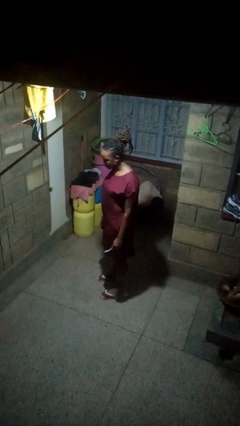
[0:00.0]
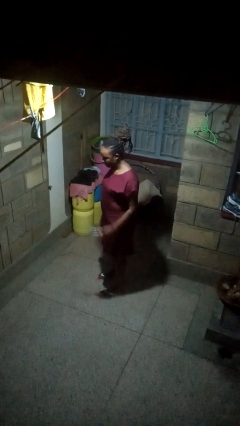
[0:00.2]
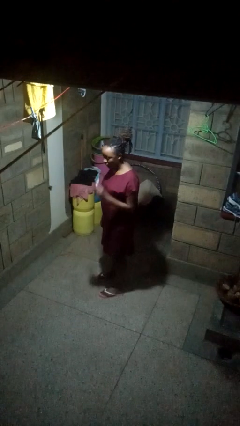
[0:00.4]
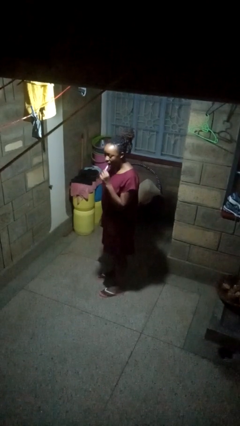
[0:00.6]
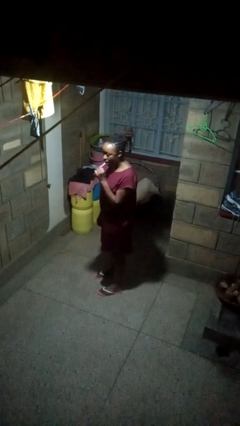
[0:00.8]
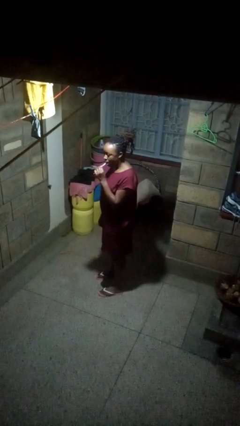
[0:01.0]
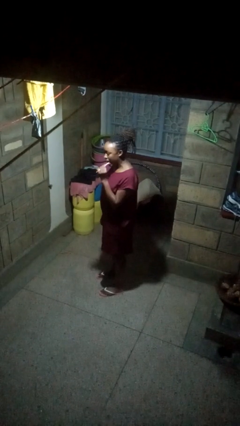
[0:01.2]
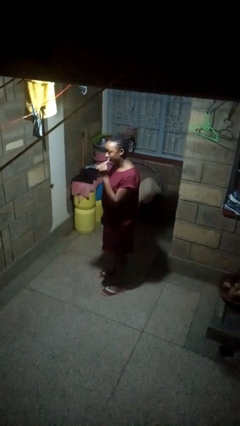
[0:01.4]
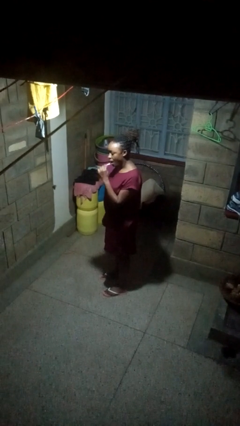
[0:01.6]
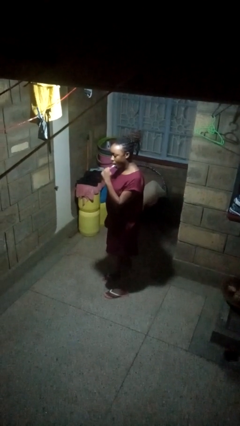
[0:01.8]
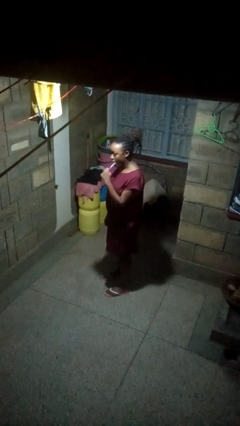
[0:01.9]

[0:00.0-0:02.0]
person brushes teeth

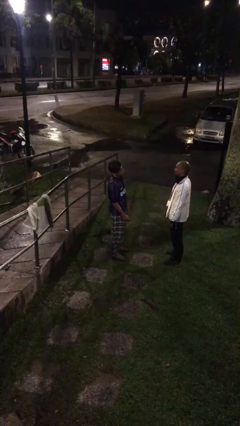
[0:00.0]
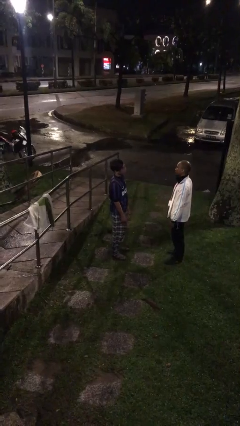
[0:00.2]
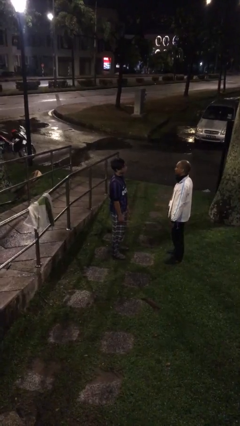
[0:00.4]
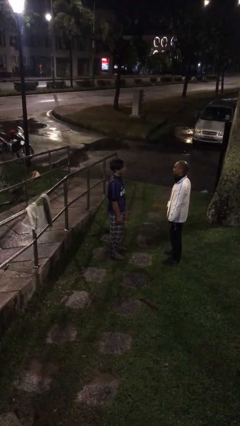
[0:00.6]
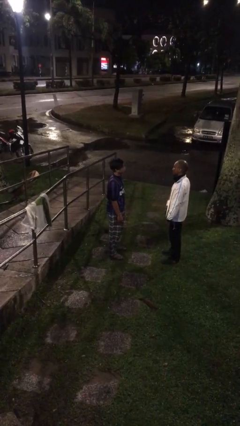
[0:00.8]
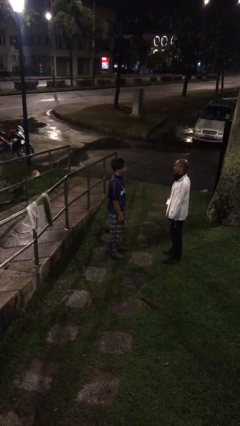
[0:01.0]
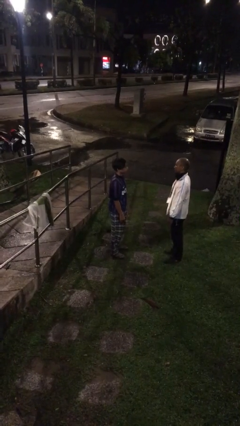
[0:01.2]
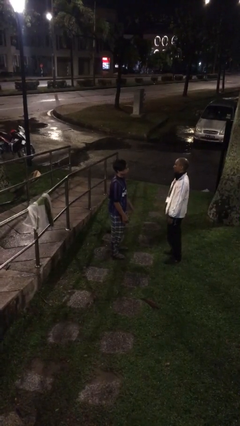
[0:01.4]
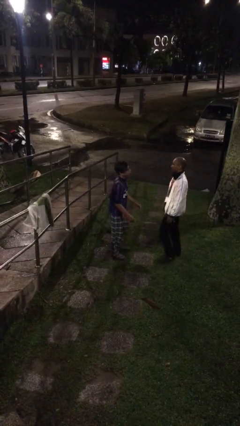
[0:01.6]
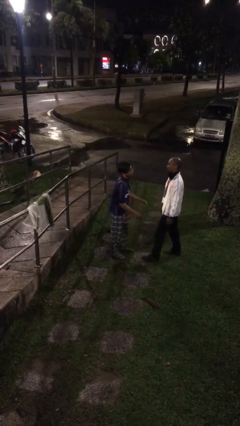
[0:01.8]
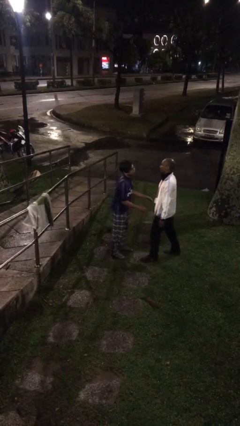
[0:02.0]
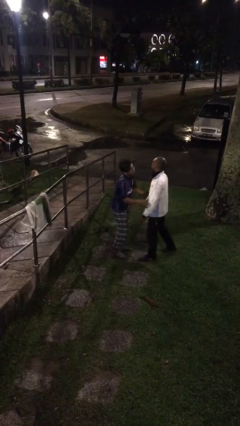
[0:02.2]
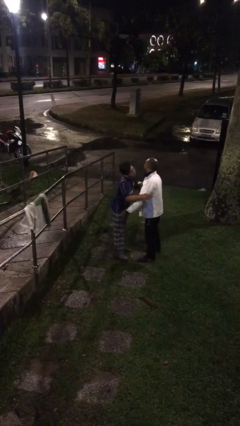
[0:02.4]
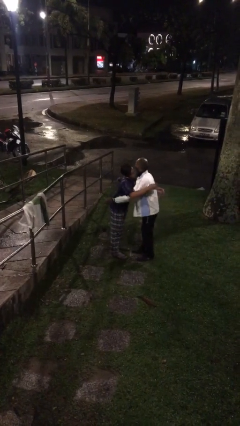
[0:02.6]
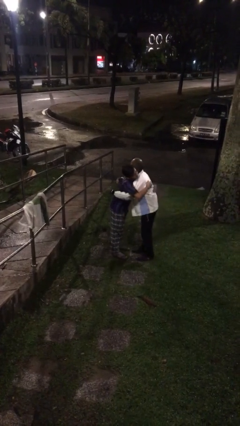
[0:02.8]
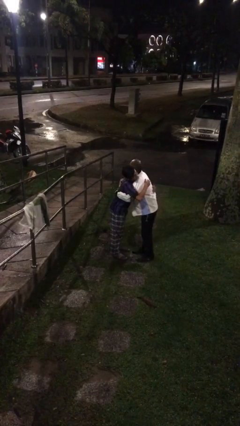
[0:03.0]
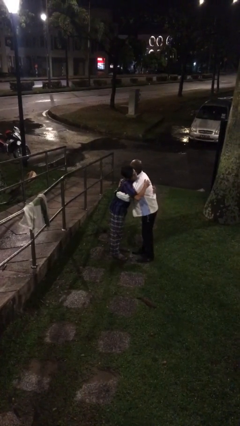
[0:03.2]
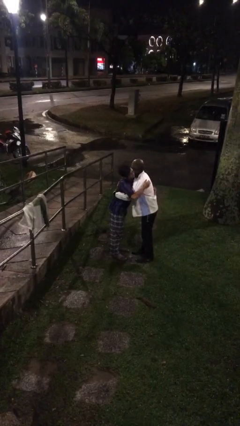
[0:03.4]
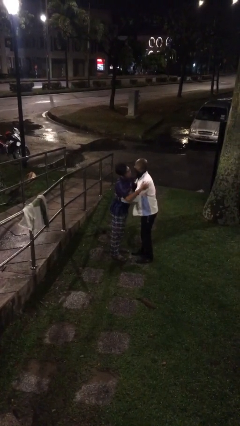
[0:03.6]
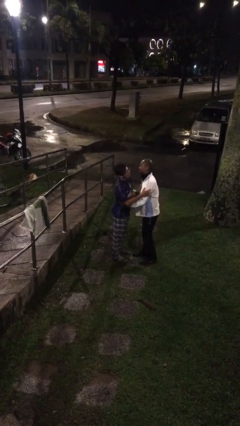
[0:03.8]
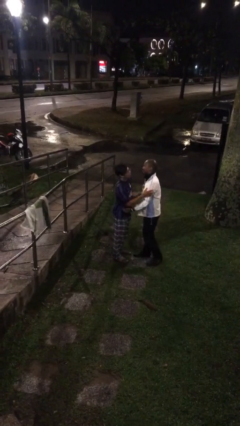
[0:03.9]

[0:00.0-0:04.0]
person embraces person

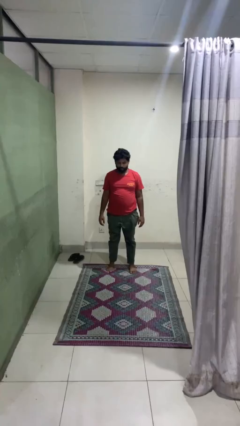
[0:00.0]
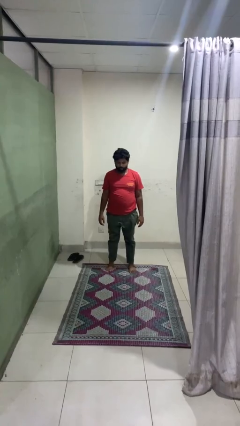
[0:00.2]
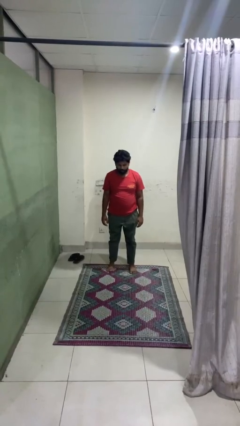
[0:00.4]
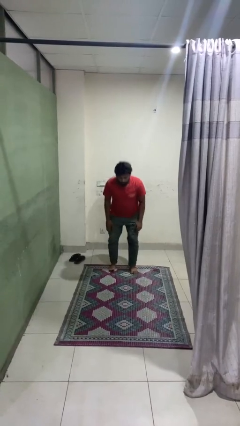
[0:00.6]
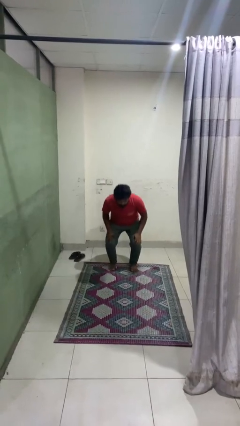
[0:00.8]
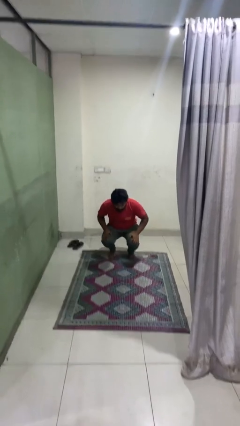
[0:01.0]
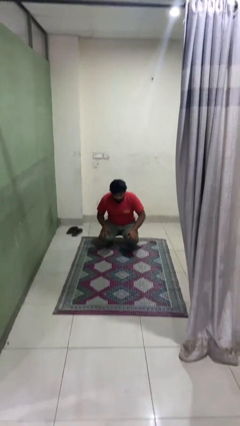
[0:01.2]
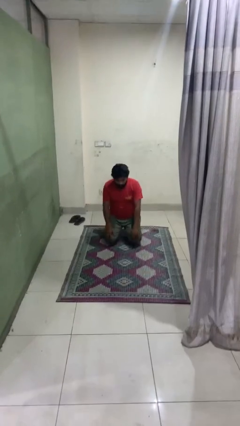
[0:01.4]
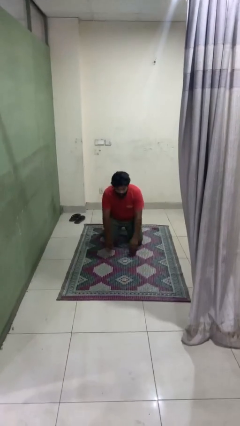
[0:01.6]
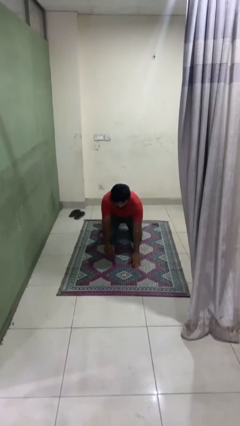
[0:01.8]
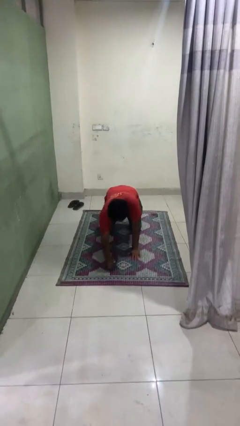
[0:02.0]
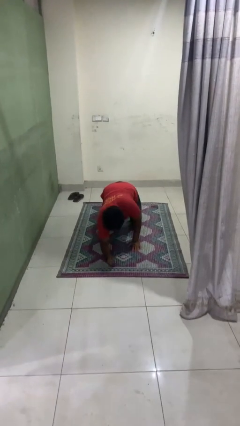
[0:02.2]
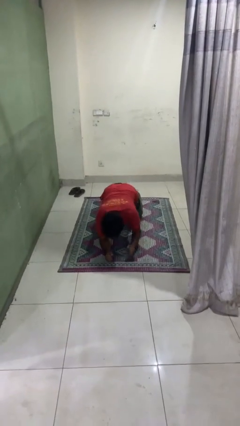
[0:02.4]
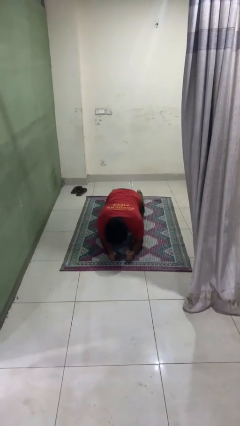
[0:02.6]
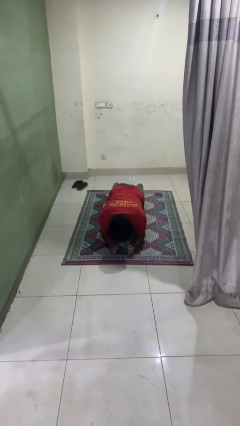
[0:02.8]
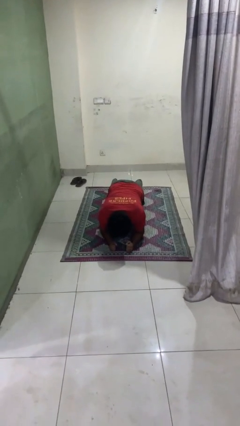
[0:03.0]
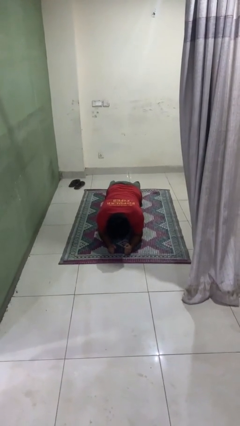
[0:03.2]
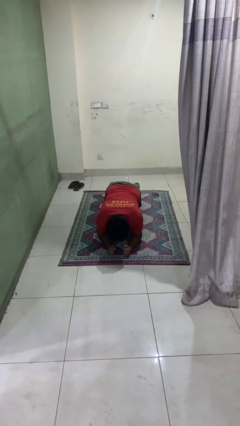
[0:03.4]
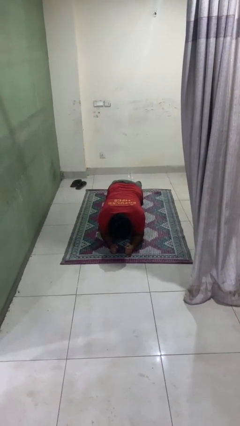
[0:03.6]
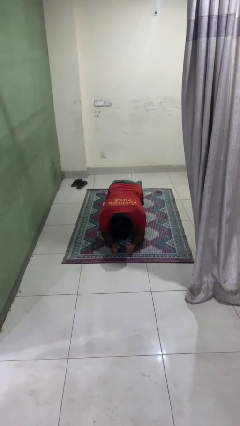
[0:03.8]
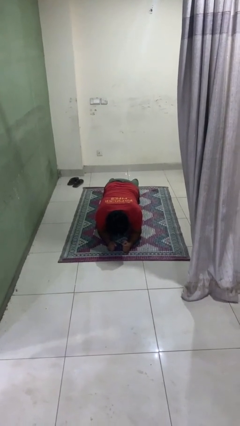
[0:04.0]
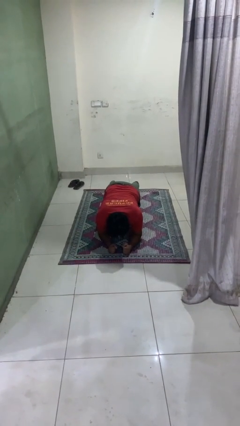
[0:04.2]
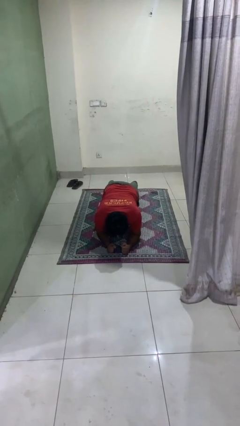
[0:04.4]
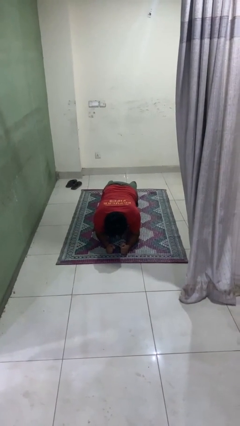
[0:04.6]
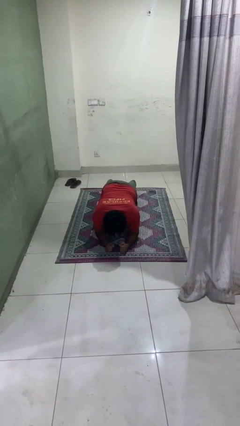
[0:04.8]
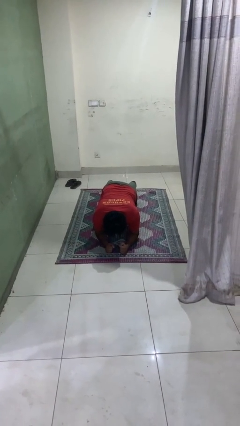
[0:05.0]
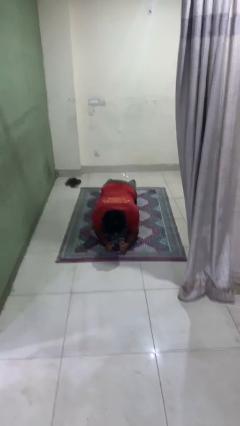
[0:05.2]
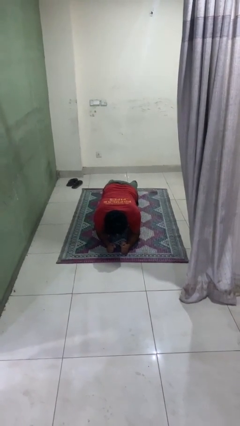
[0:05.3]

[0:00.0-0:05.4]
person exercises with plank

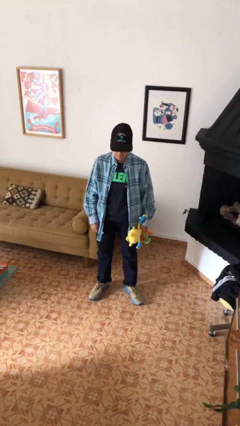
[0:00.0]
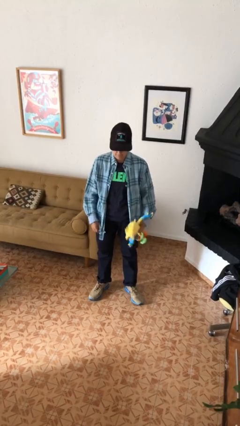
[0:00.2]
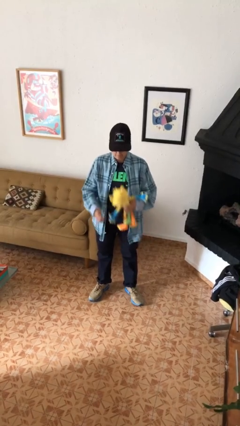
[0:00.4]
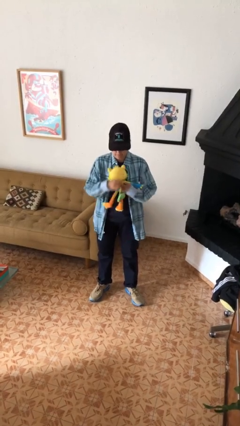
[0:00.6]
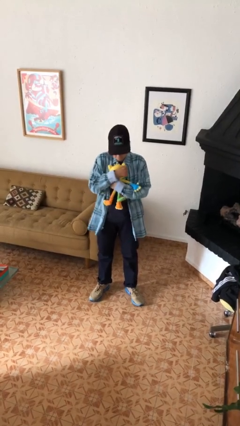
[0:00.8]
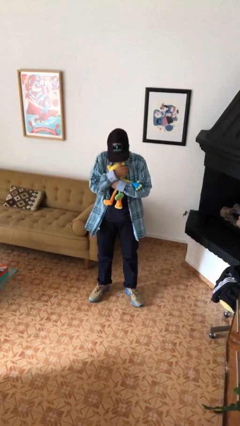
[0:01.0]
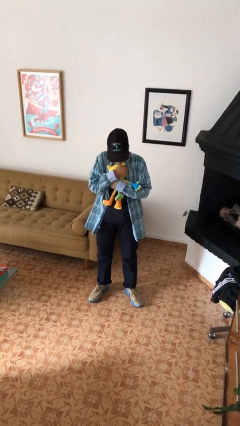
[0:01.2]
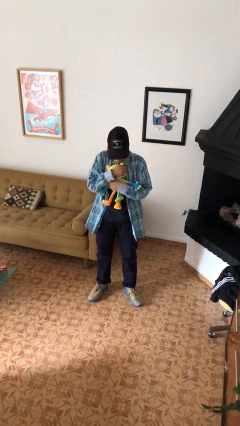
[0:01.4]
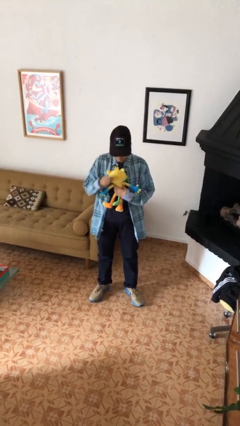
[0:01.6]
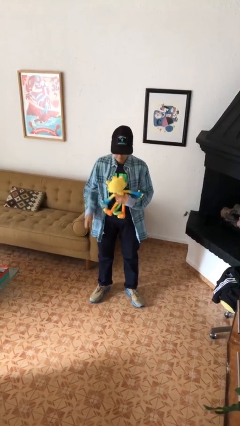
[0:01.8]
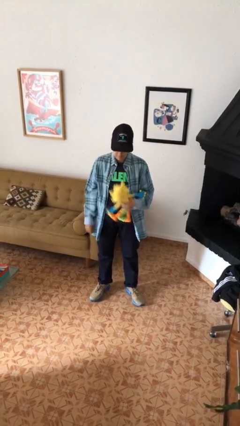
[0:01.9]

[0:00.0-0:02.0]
person hugs stuffed animal

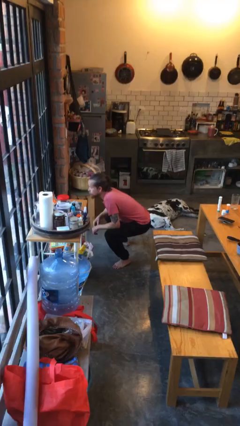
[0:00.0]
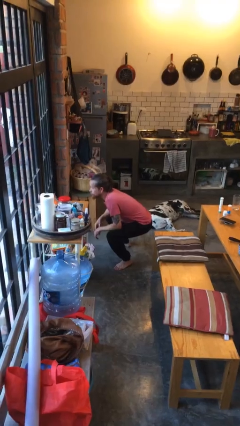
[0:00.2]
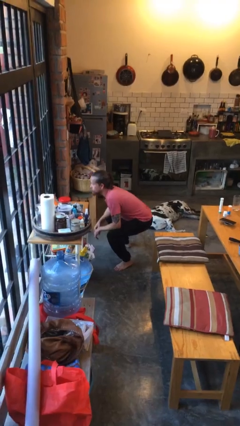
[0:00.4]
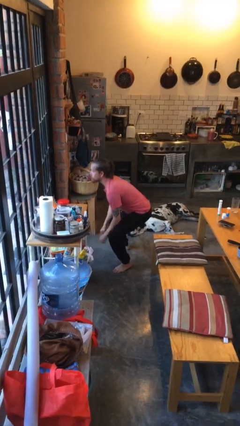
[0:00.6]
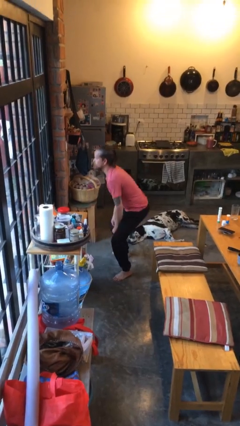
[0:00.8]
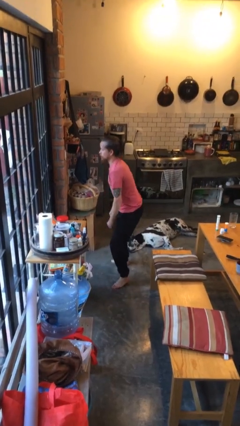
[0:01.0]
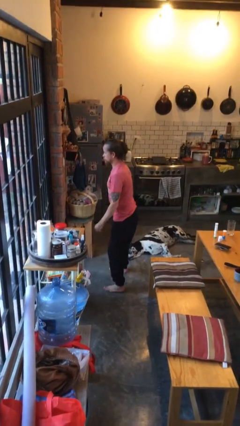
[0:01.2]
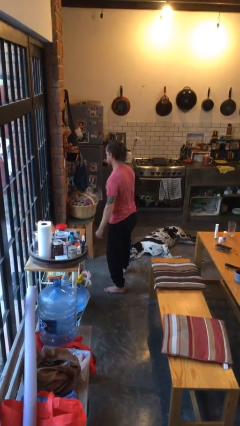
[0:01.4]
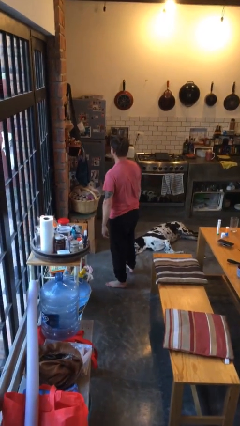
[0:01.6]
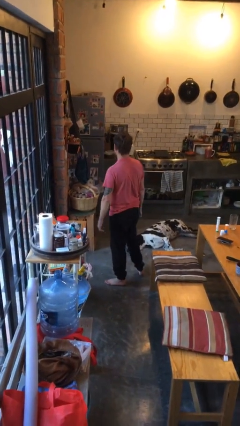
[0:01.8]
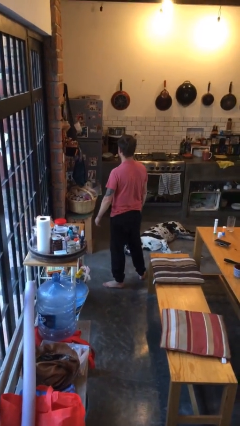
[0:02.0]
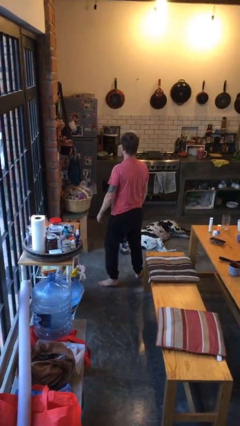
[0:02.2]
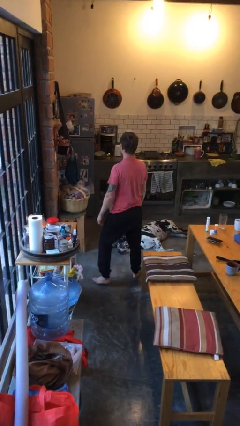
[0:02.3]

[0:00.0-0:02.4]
person stands up

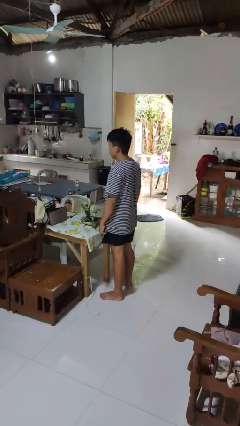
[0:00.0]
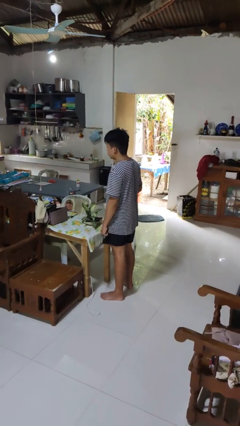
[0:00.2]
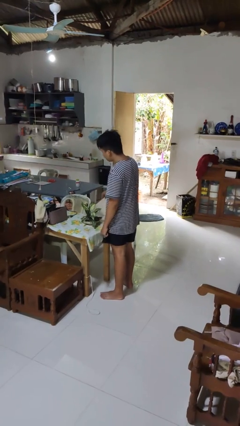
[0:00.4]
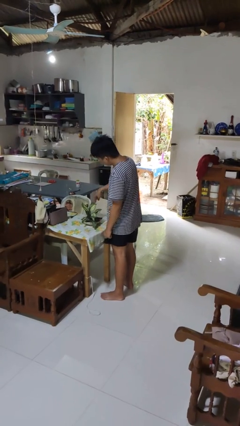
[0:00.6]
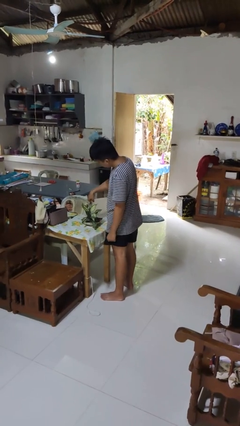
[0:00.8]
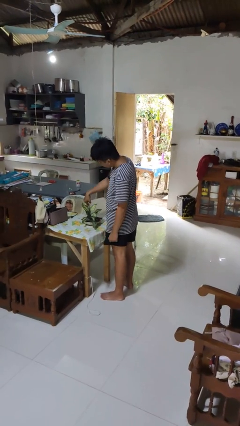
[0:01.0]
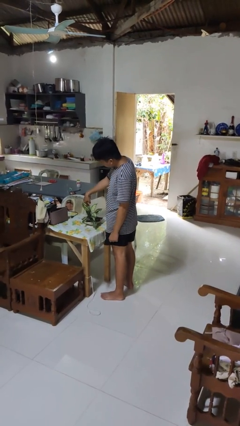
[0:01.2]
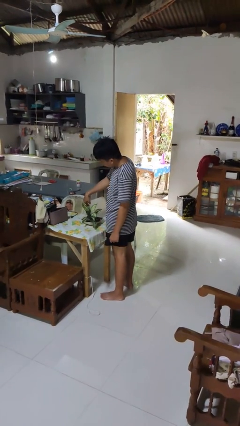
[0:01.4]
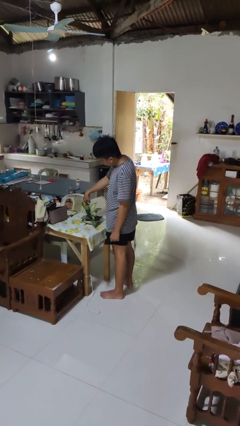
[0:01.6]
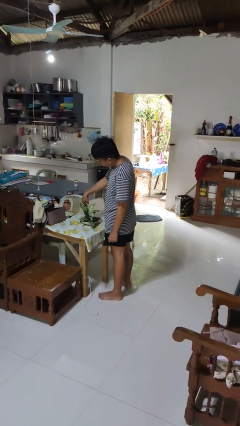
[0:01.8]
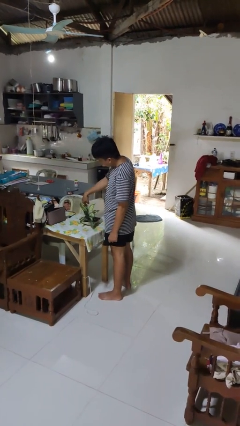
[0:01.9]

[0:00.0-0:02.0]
person waters houseplant
